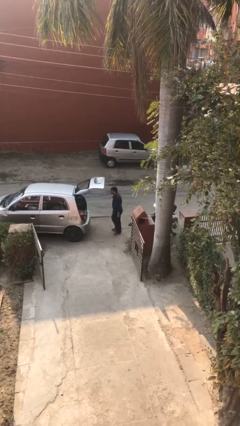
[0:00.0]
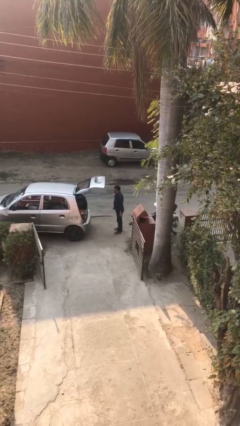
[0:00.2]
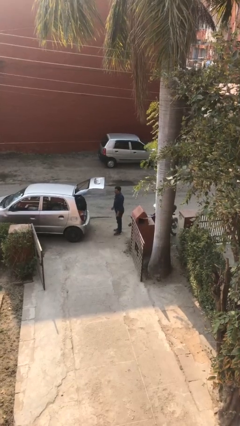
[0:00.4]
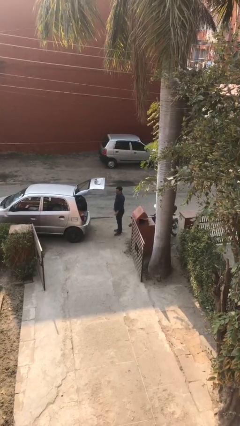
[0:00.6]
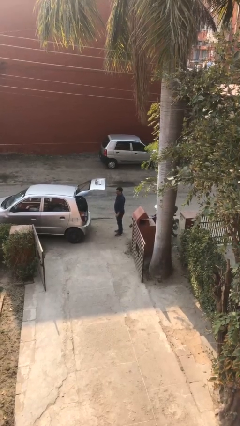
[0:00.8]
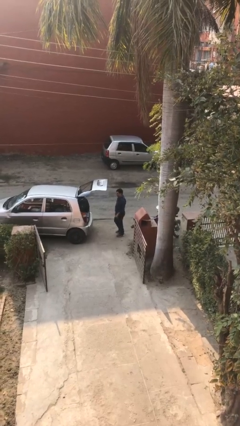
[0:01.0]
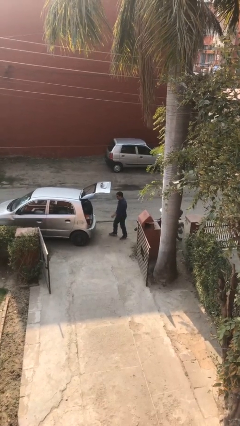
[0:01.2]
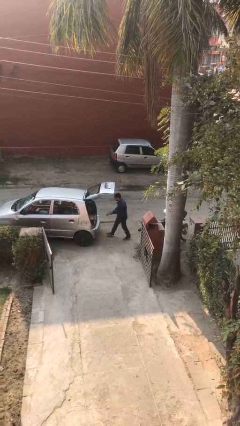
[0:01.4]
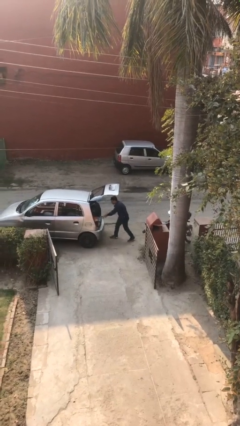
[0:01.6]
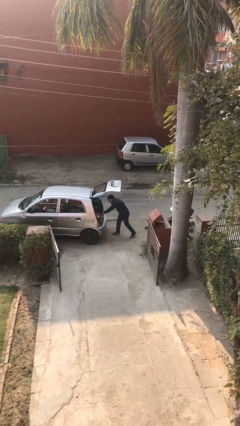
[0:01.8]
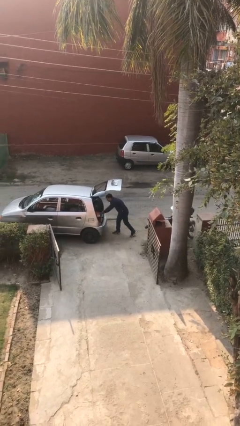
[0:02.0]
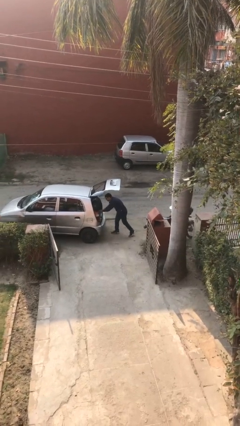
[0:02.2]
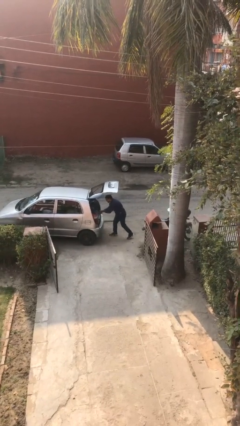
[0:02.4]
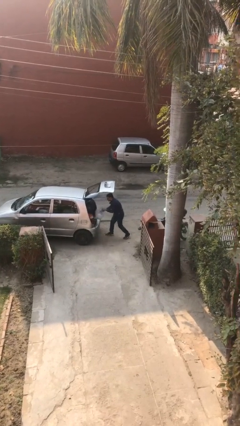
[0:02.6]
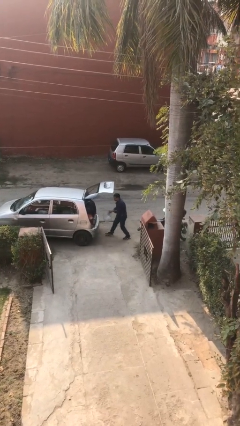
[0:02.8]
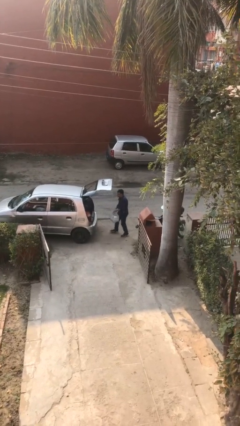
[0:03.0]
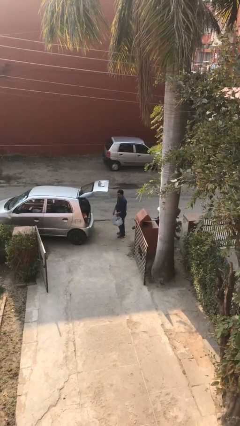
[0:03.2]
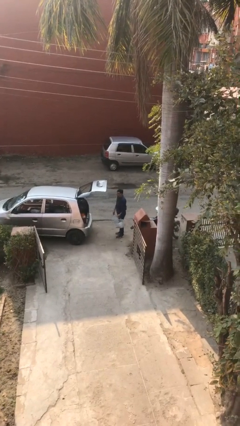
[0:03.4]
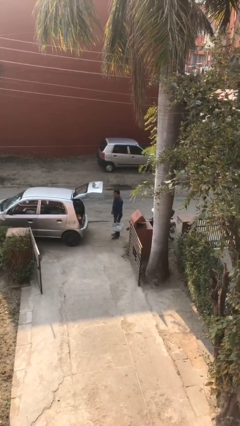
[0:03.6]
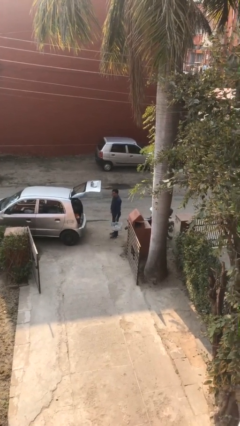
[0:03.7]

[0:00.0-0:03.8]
person unloads car

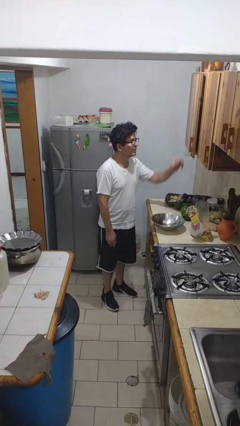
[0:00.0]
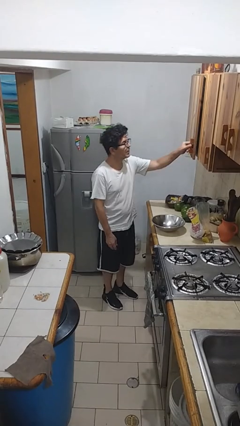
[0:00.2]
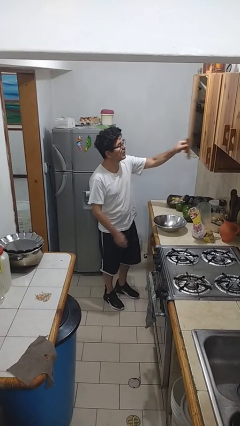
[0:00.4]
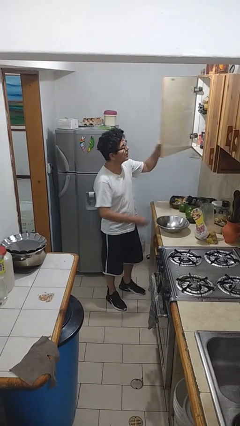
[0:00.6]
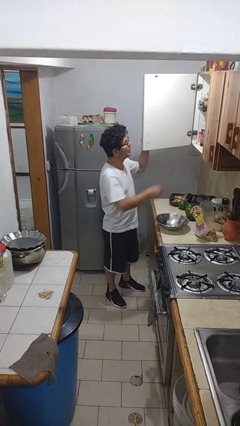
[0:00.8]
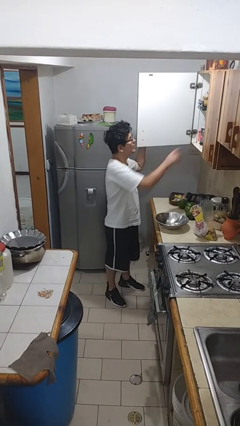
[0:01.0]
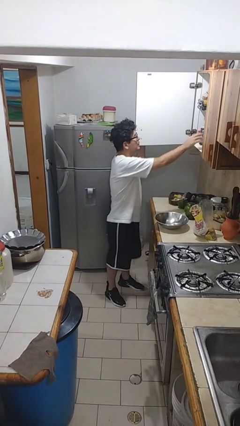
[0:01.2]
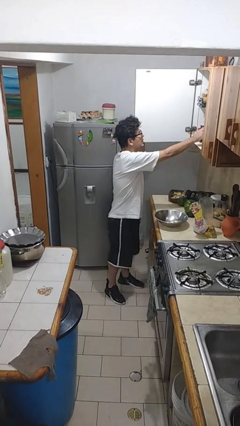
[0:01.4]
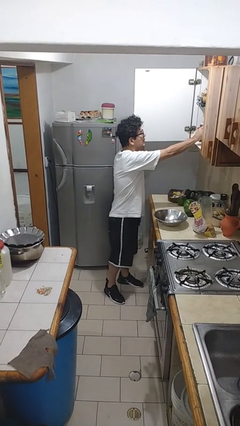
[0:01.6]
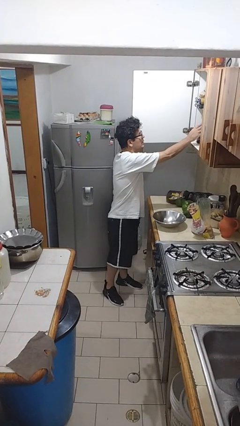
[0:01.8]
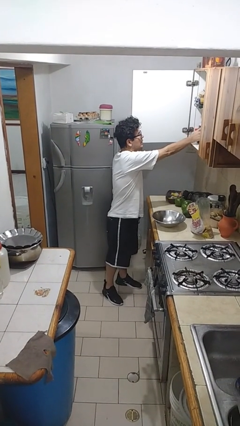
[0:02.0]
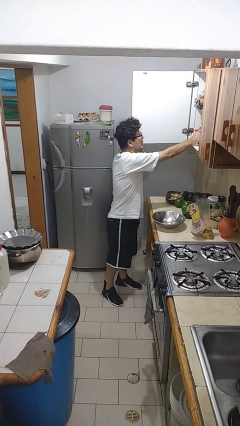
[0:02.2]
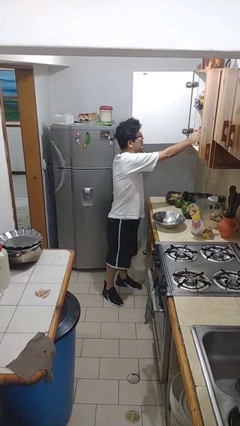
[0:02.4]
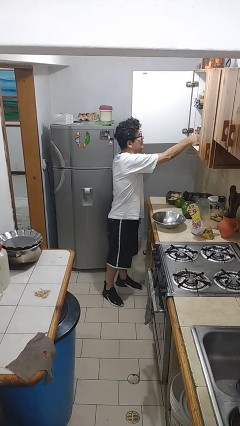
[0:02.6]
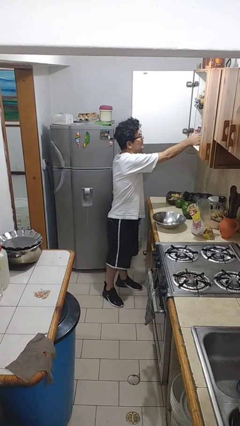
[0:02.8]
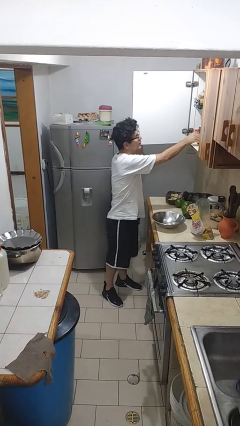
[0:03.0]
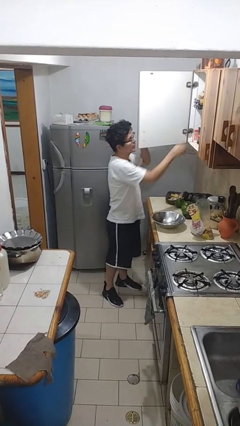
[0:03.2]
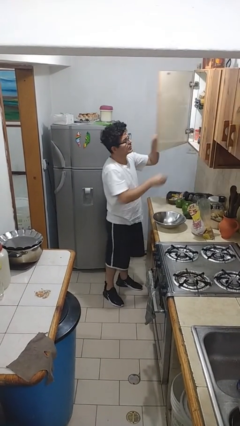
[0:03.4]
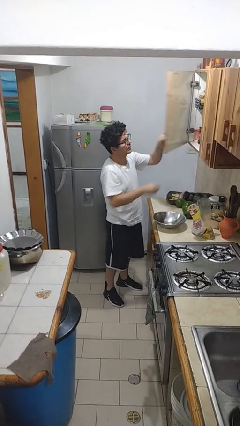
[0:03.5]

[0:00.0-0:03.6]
person searches in kitchen drawer

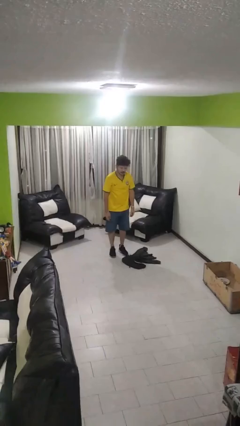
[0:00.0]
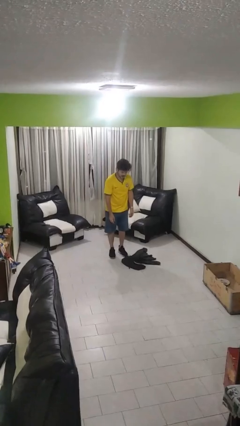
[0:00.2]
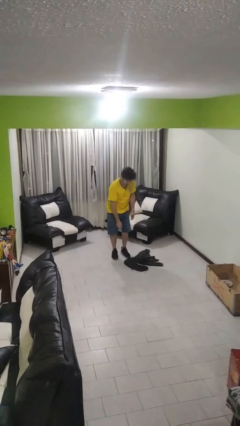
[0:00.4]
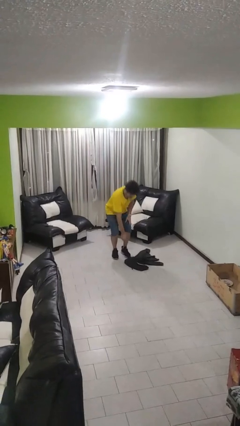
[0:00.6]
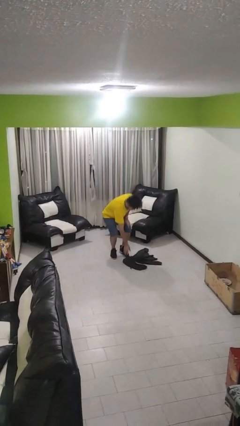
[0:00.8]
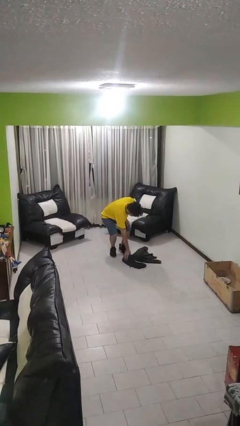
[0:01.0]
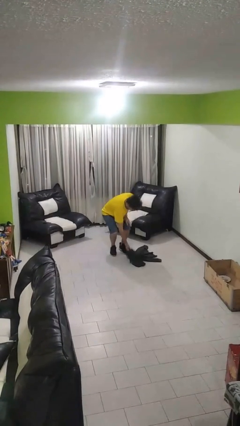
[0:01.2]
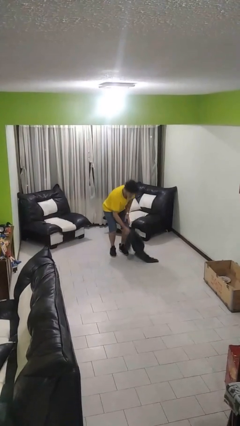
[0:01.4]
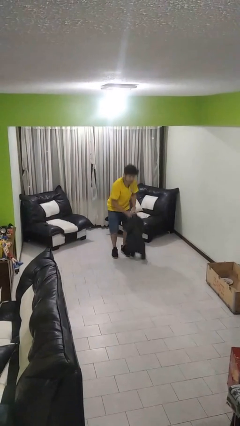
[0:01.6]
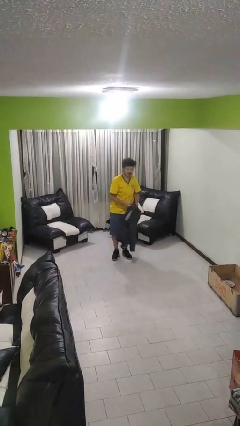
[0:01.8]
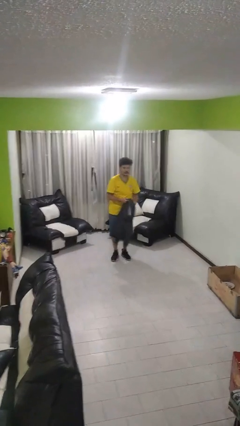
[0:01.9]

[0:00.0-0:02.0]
person picks up object from floor

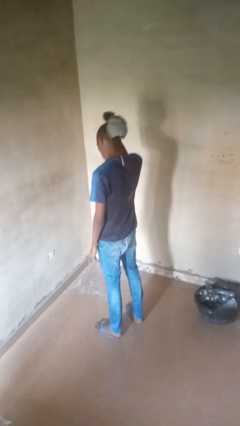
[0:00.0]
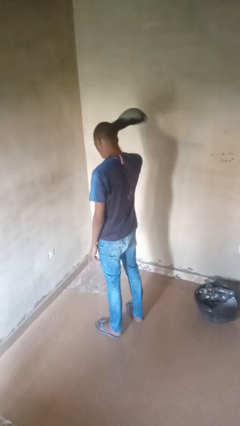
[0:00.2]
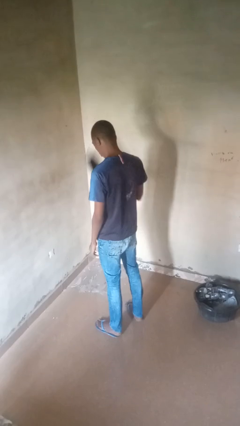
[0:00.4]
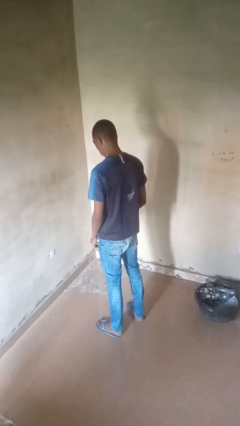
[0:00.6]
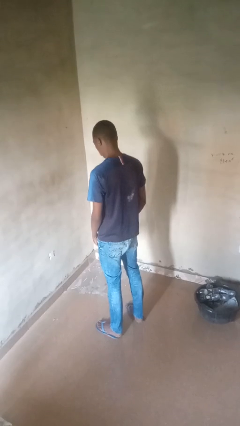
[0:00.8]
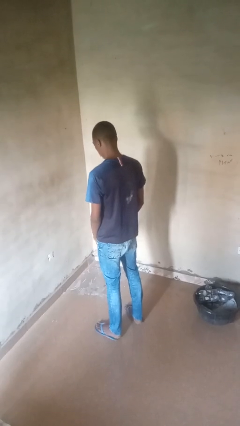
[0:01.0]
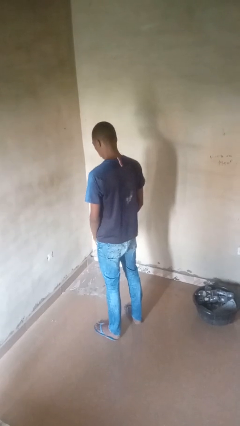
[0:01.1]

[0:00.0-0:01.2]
person takes off hat

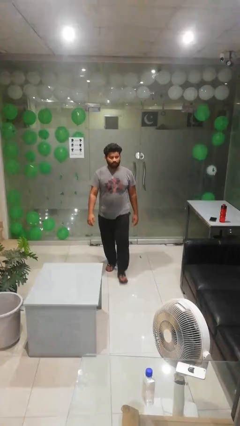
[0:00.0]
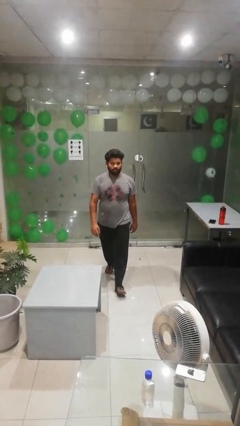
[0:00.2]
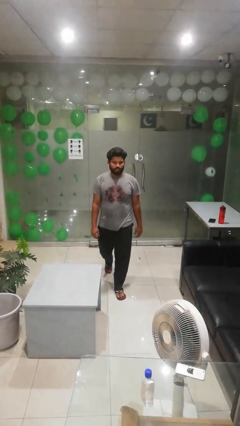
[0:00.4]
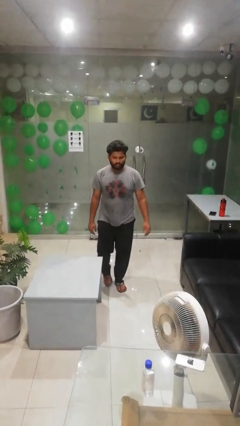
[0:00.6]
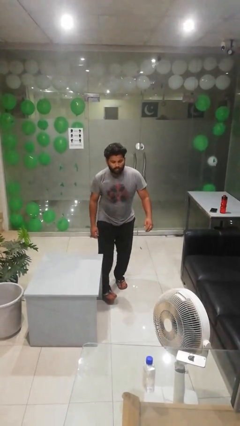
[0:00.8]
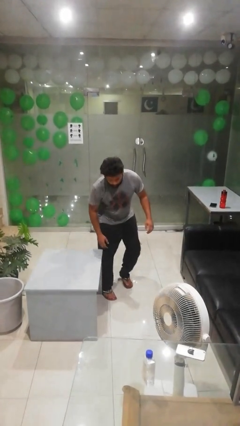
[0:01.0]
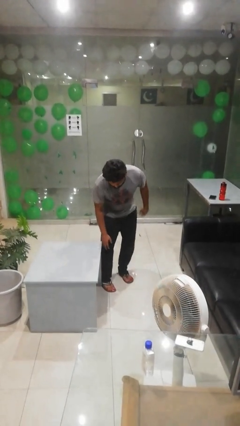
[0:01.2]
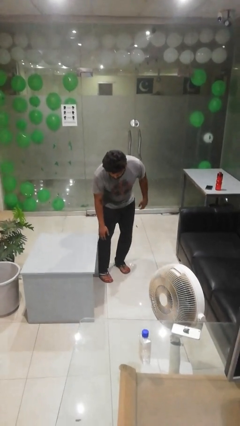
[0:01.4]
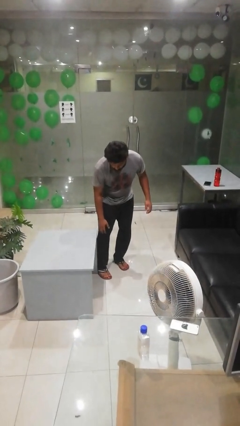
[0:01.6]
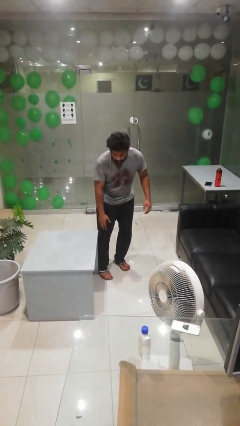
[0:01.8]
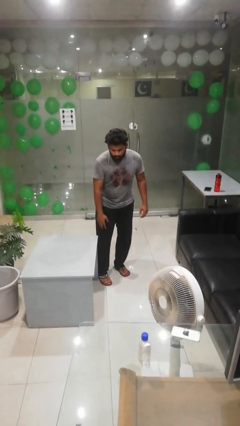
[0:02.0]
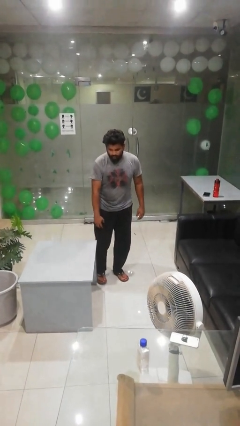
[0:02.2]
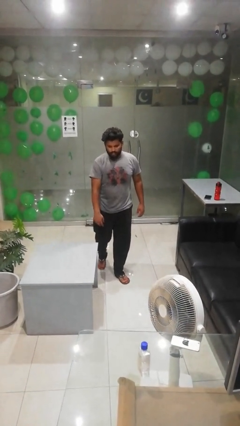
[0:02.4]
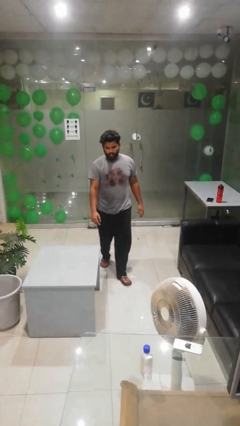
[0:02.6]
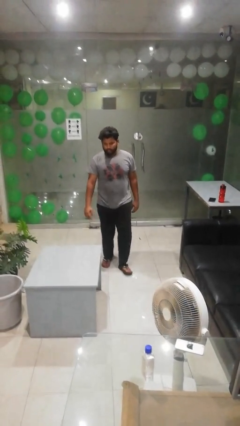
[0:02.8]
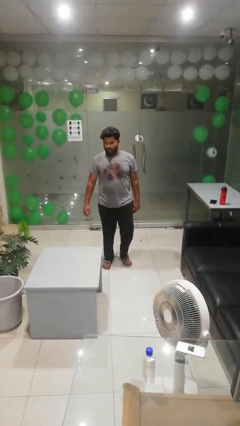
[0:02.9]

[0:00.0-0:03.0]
person bumps into table

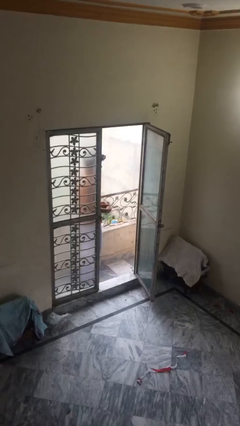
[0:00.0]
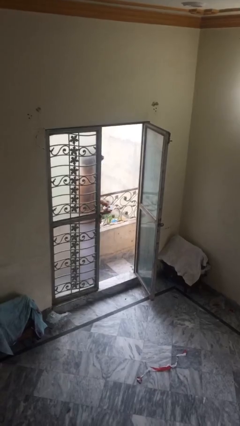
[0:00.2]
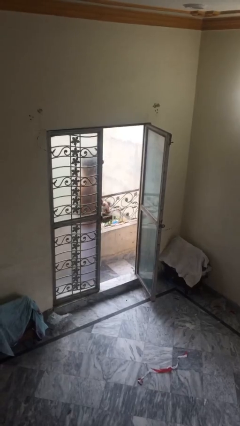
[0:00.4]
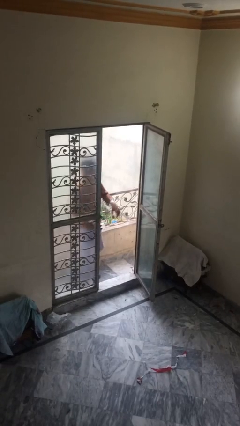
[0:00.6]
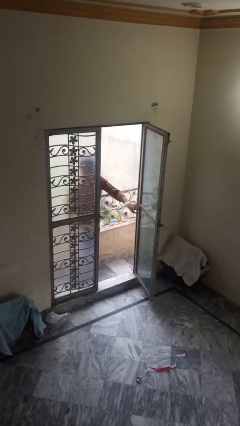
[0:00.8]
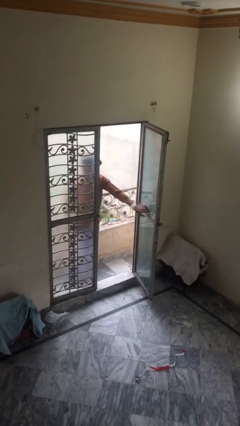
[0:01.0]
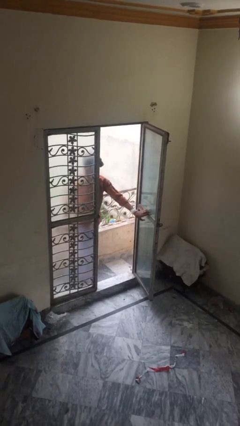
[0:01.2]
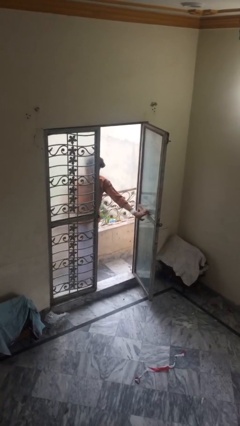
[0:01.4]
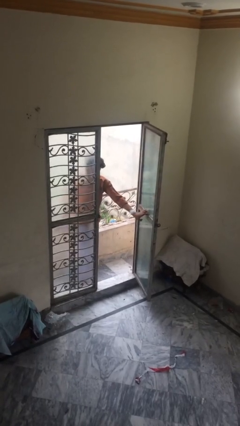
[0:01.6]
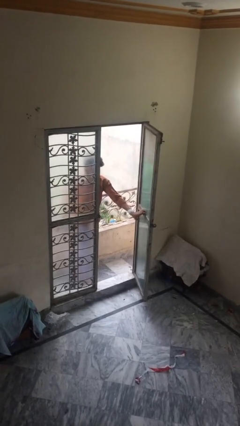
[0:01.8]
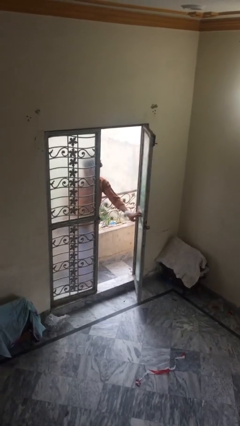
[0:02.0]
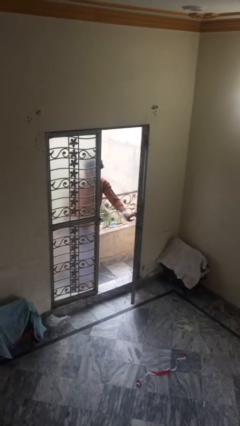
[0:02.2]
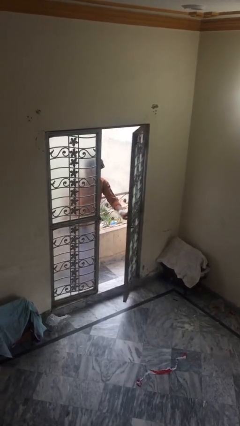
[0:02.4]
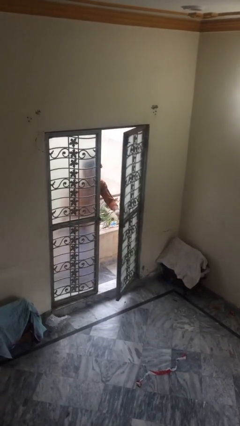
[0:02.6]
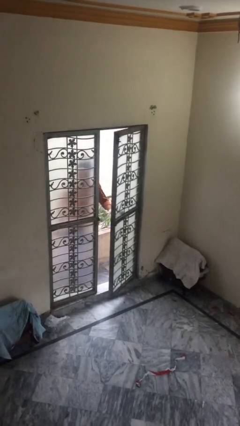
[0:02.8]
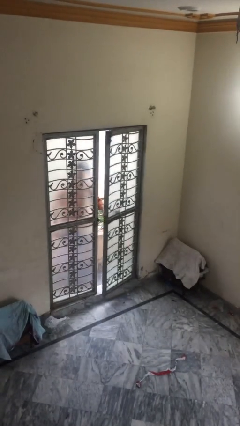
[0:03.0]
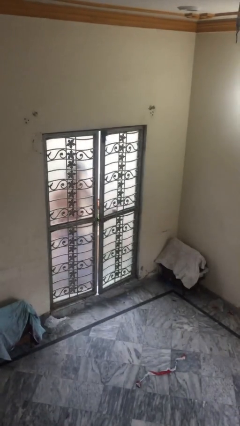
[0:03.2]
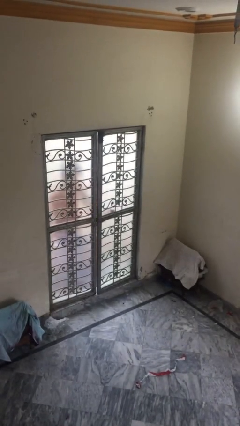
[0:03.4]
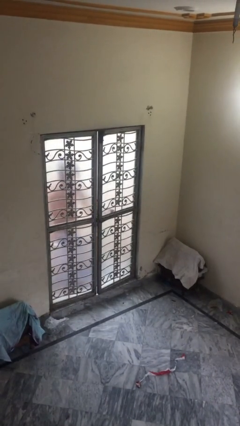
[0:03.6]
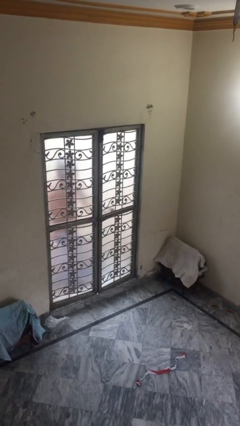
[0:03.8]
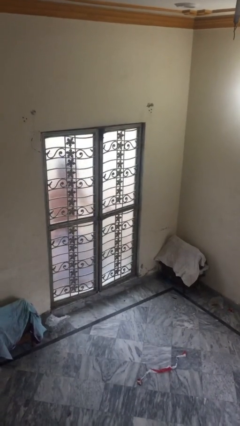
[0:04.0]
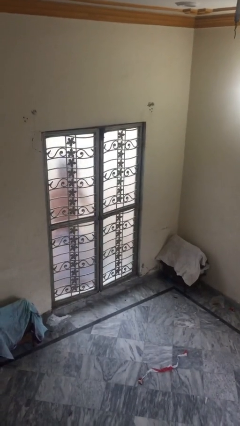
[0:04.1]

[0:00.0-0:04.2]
person closes facility door
